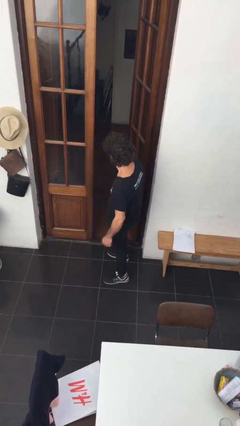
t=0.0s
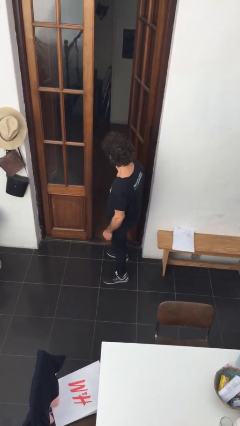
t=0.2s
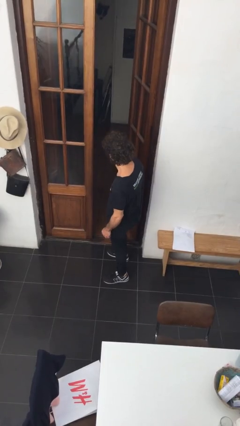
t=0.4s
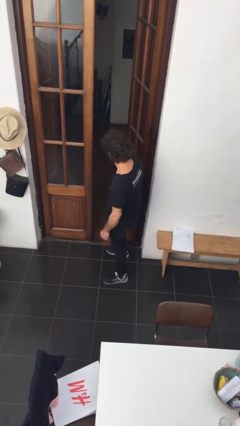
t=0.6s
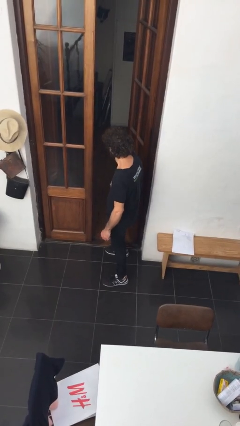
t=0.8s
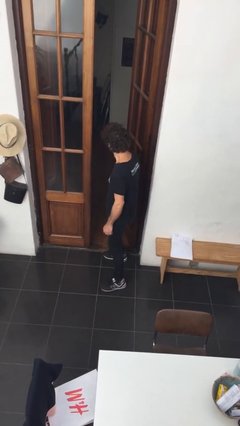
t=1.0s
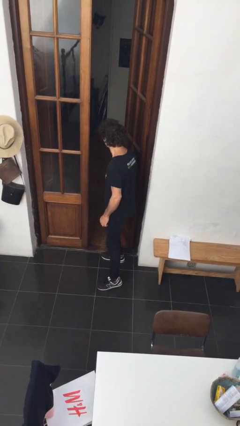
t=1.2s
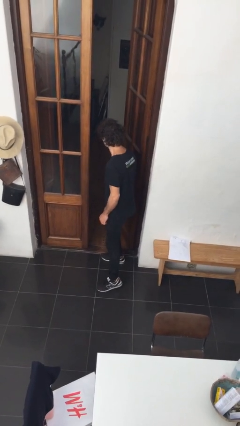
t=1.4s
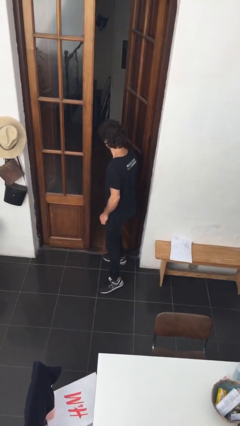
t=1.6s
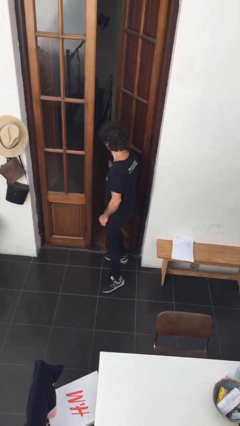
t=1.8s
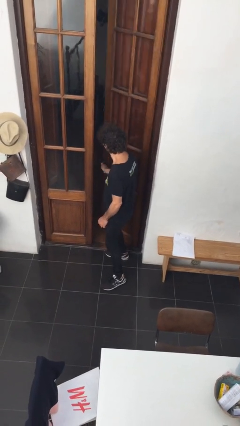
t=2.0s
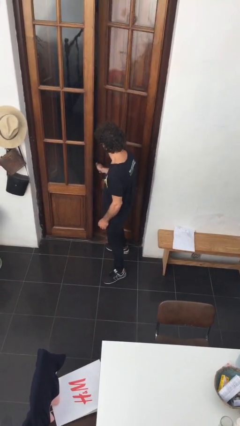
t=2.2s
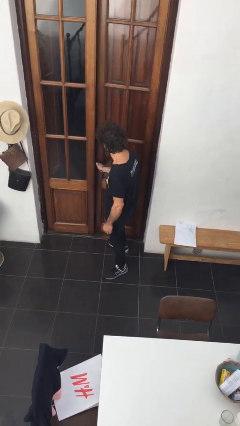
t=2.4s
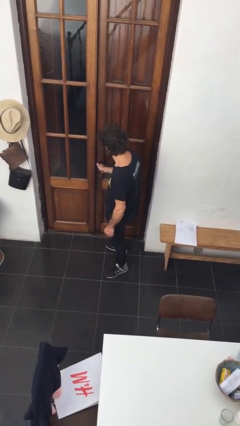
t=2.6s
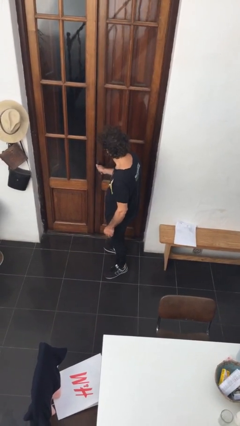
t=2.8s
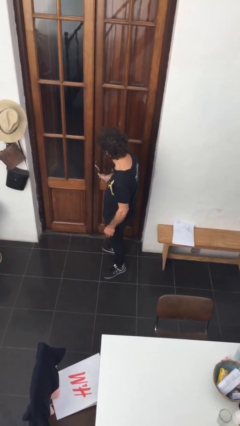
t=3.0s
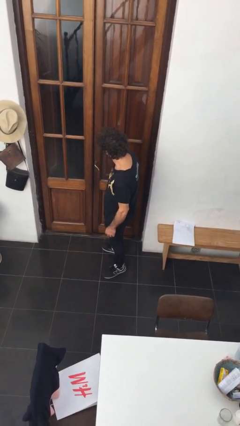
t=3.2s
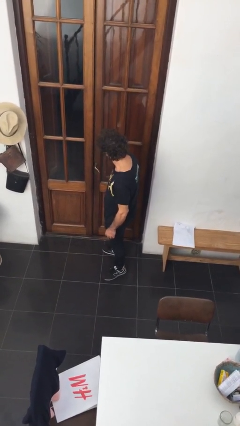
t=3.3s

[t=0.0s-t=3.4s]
person closes facility door

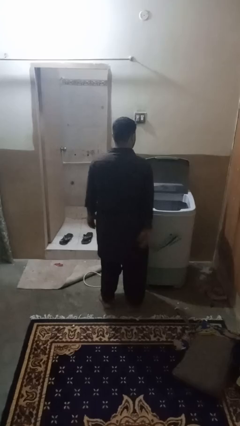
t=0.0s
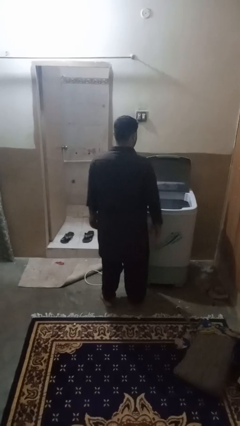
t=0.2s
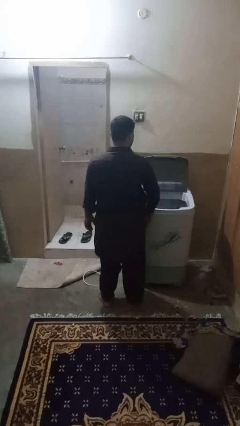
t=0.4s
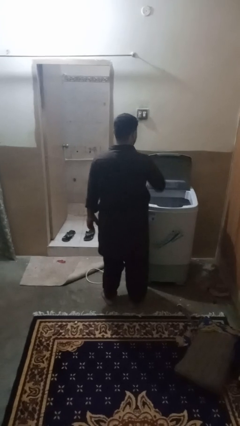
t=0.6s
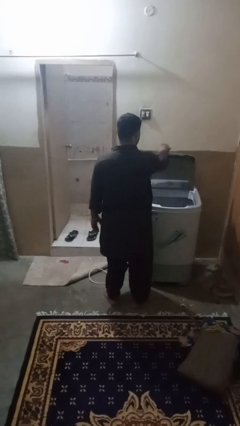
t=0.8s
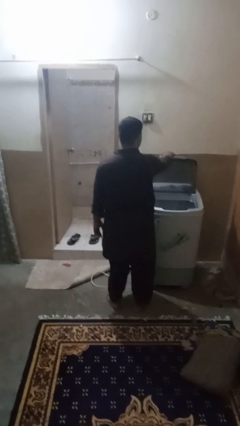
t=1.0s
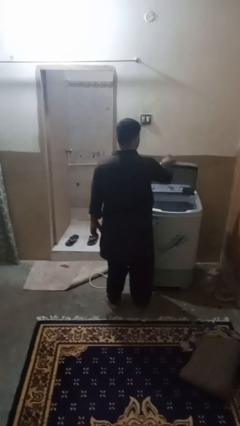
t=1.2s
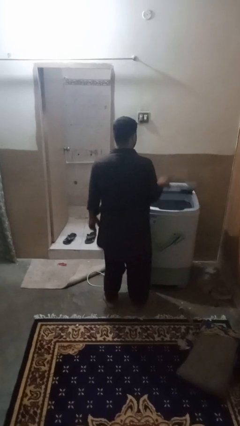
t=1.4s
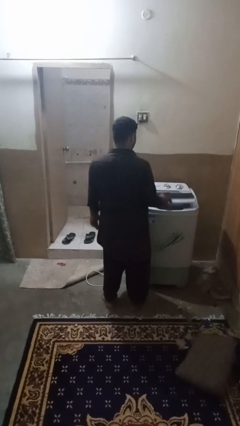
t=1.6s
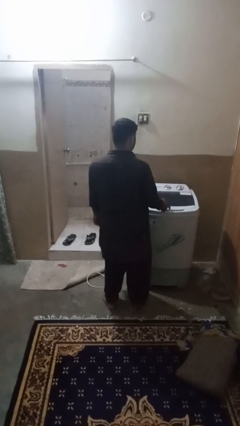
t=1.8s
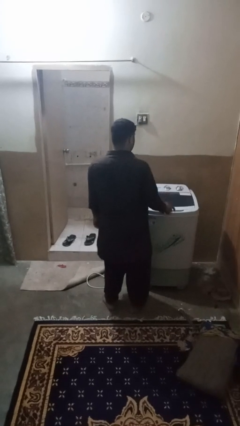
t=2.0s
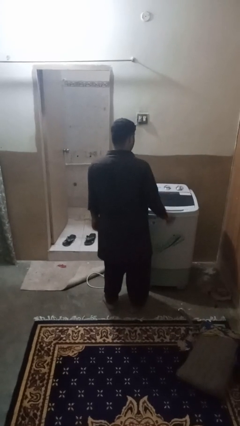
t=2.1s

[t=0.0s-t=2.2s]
person closes clothes washer

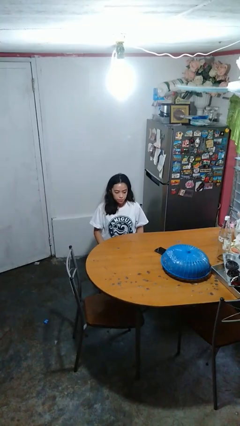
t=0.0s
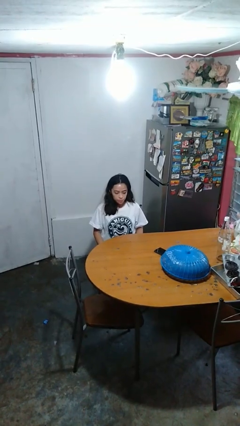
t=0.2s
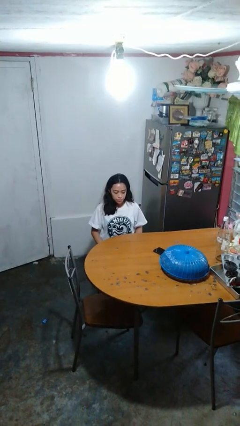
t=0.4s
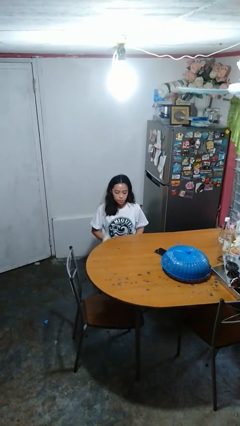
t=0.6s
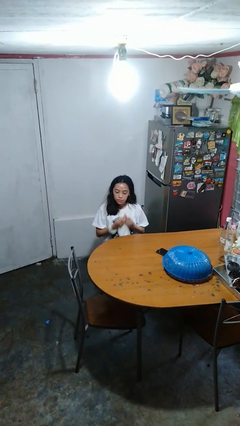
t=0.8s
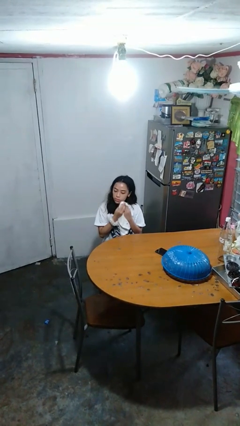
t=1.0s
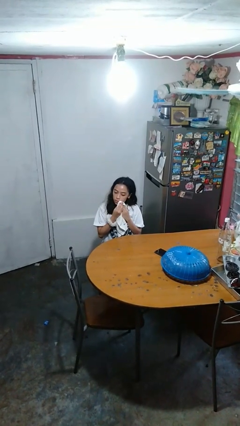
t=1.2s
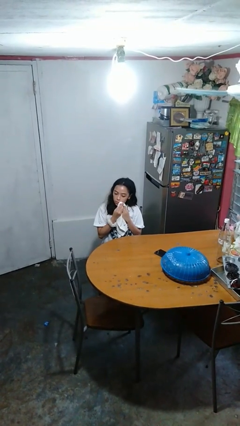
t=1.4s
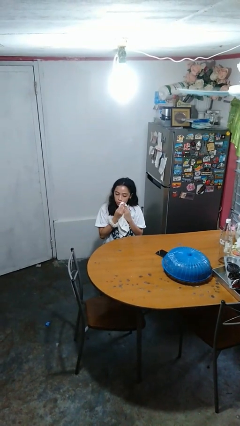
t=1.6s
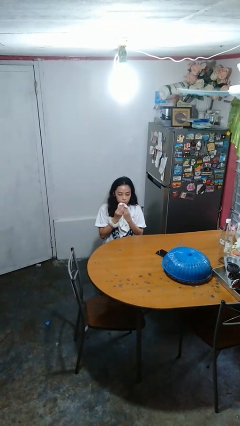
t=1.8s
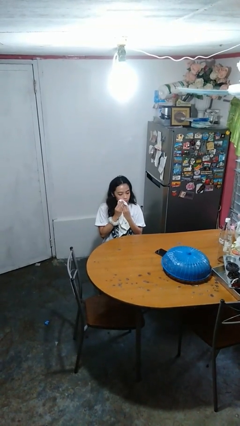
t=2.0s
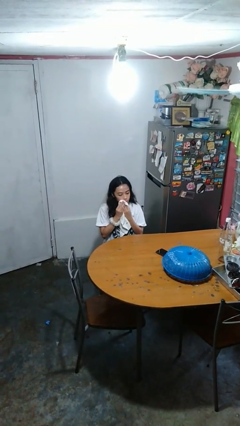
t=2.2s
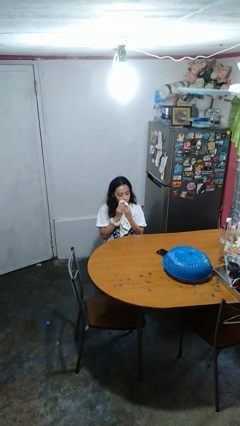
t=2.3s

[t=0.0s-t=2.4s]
person wipes mouth with napkin

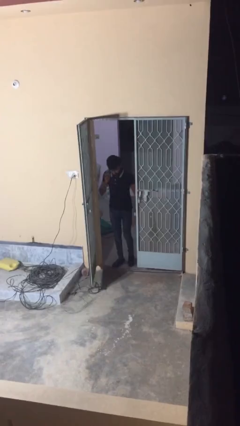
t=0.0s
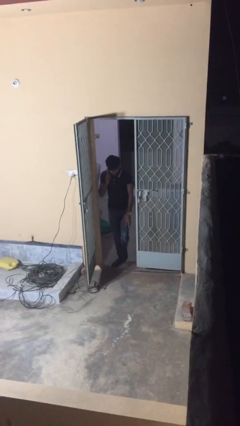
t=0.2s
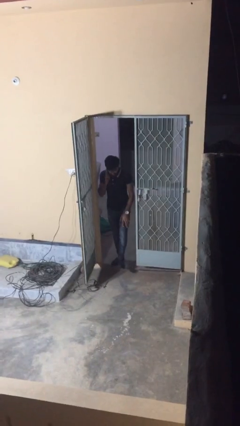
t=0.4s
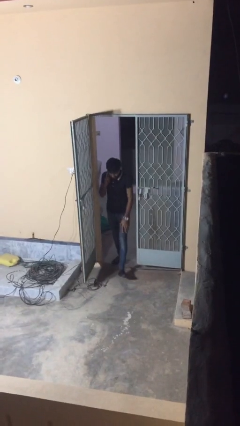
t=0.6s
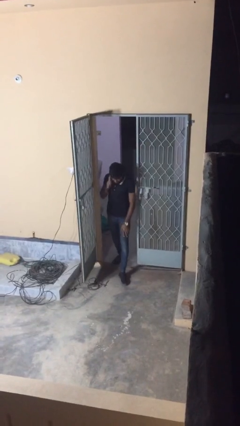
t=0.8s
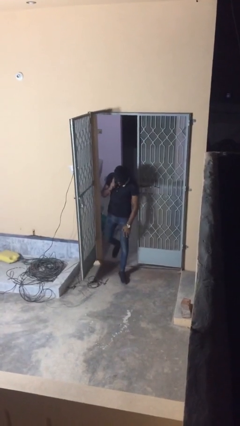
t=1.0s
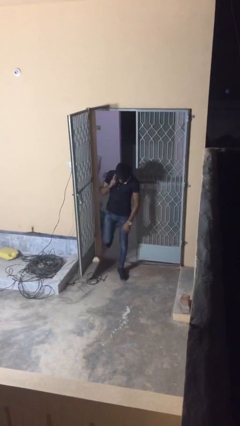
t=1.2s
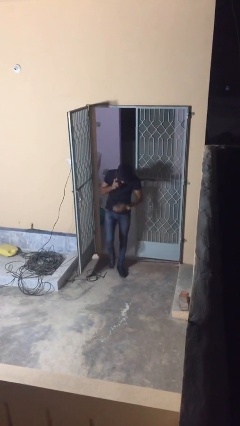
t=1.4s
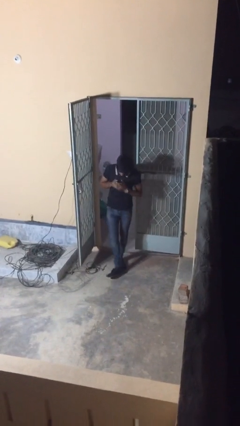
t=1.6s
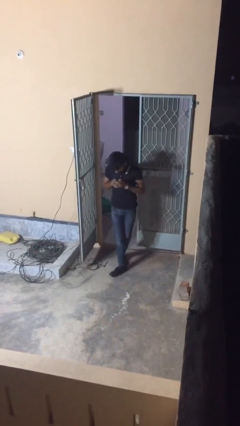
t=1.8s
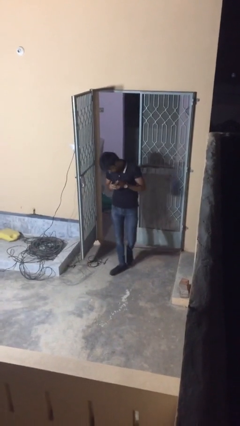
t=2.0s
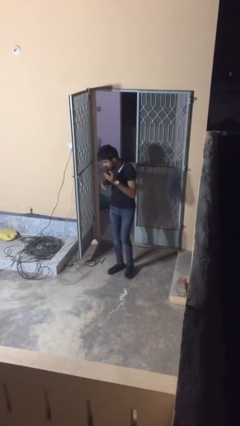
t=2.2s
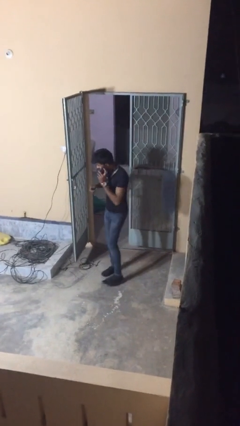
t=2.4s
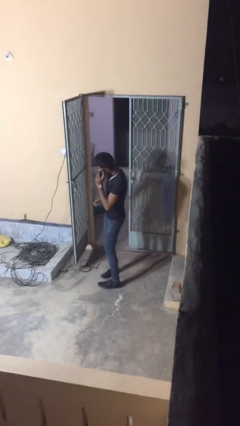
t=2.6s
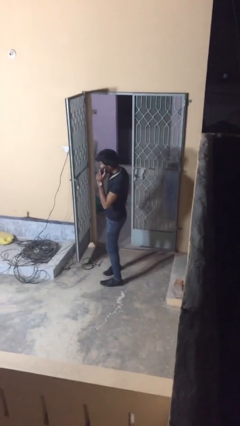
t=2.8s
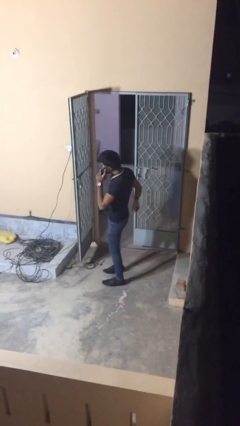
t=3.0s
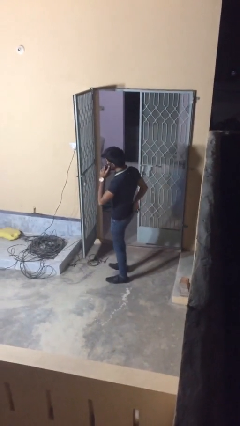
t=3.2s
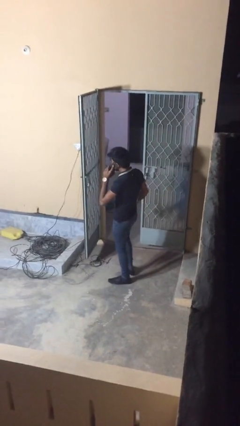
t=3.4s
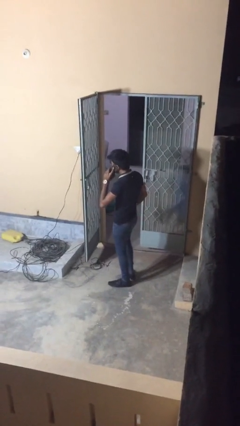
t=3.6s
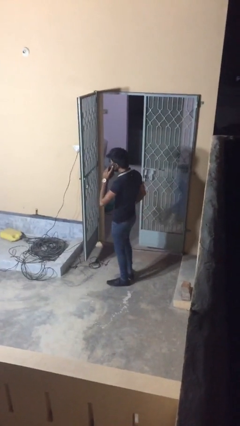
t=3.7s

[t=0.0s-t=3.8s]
person enters scene through structure

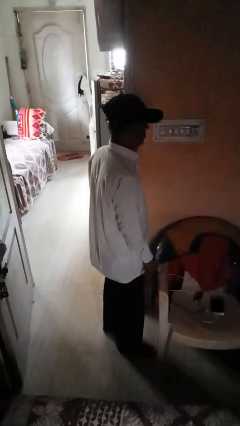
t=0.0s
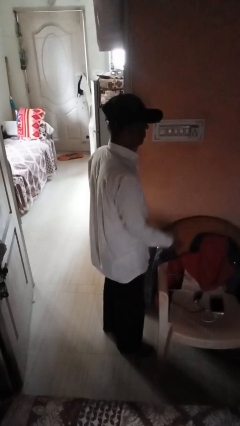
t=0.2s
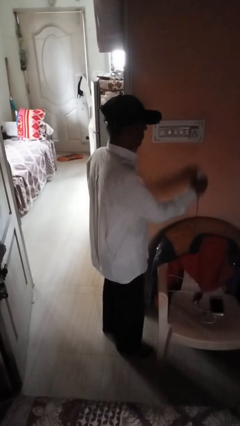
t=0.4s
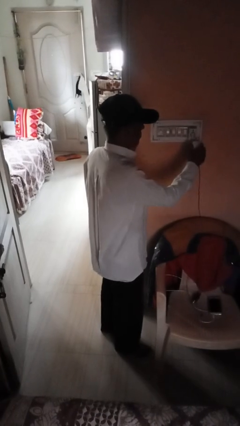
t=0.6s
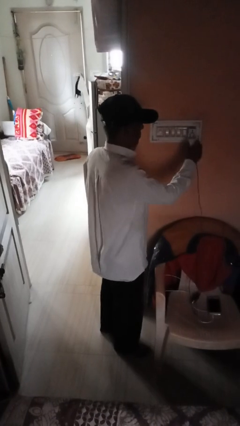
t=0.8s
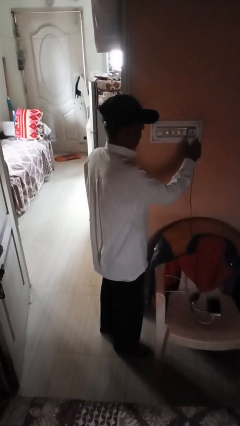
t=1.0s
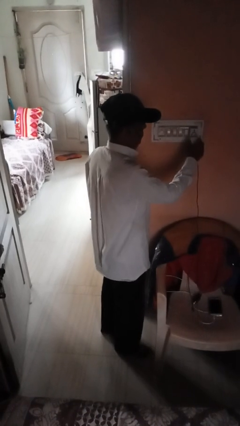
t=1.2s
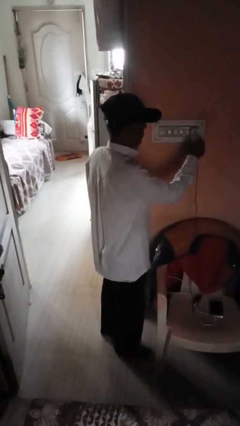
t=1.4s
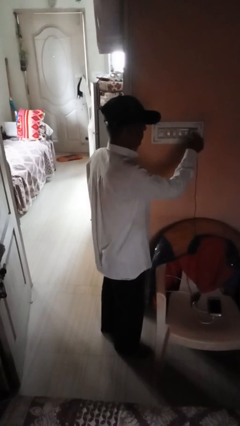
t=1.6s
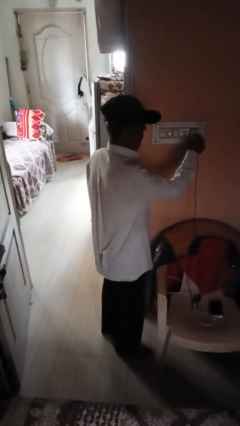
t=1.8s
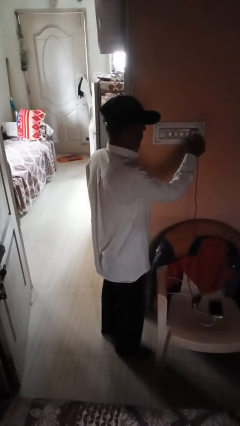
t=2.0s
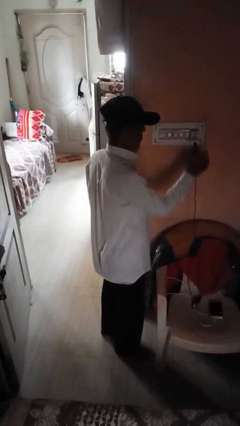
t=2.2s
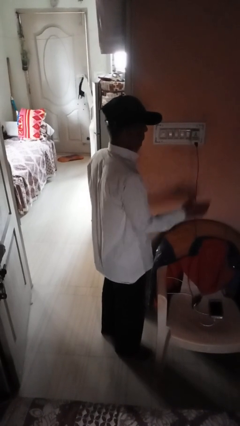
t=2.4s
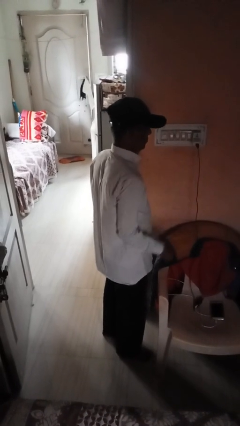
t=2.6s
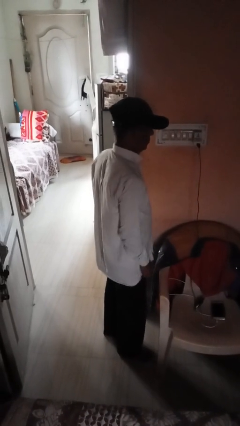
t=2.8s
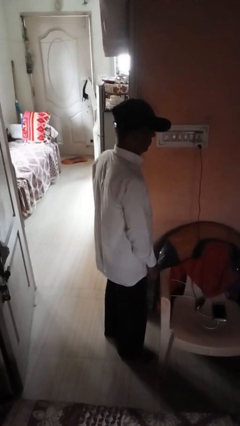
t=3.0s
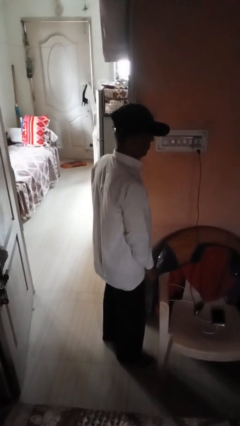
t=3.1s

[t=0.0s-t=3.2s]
person plugs into electrical socket

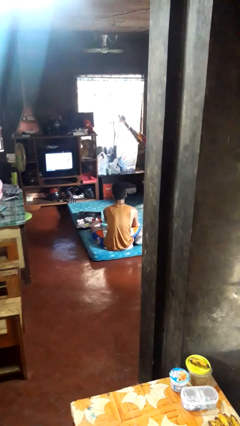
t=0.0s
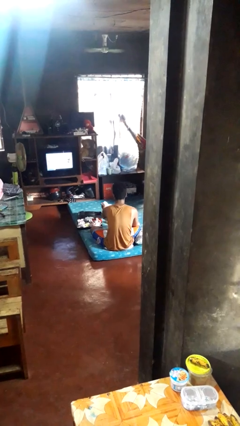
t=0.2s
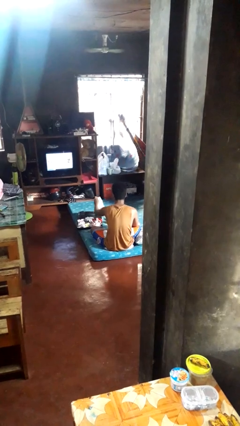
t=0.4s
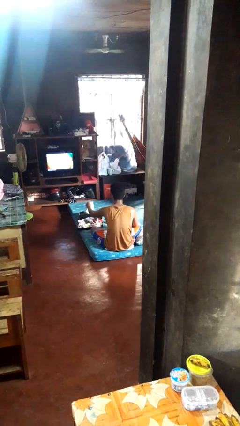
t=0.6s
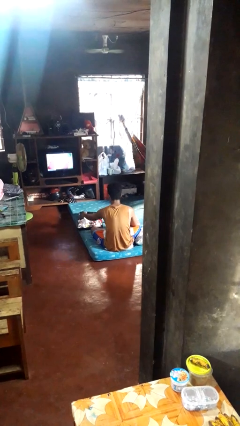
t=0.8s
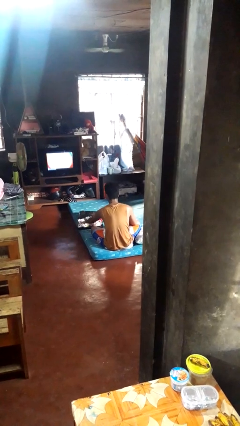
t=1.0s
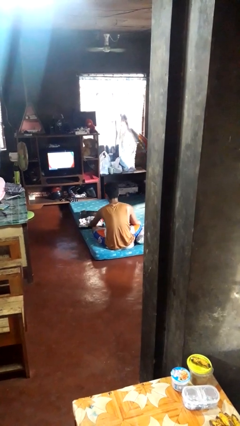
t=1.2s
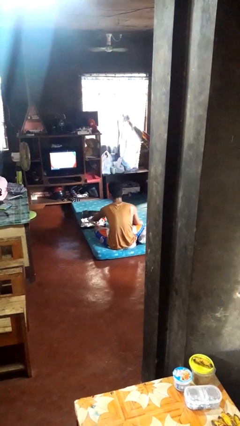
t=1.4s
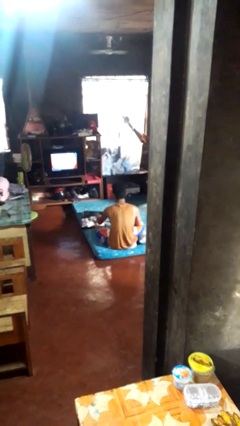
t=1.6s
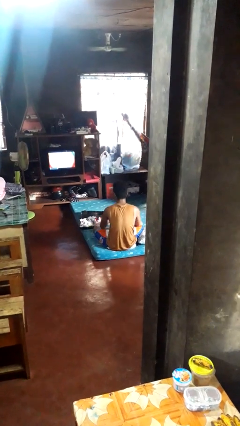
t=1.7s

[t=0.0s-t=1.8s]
person loads clothes into suitcase

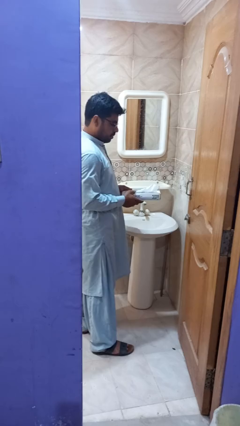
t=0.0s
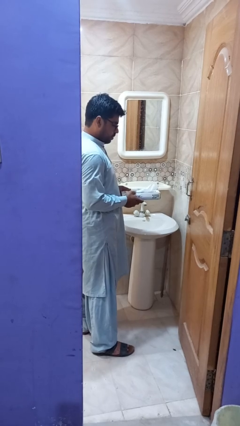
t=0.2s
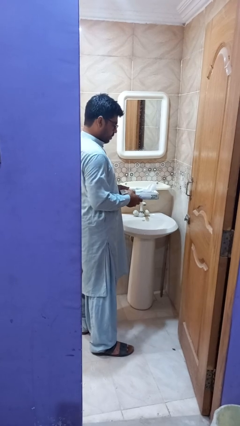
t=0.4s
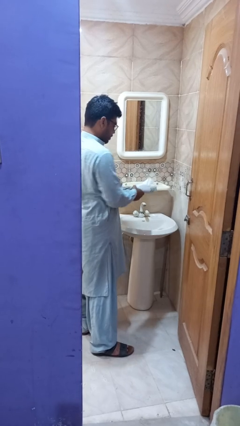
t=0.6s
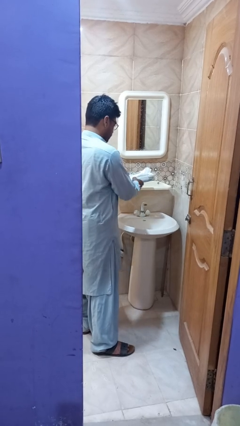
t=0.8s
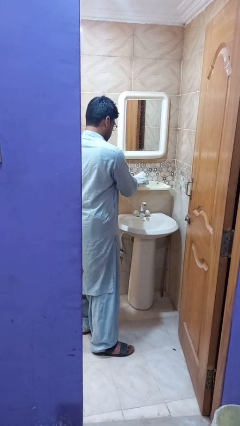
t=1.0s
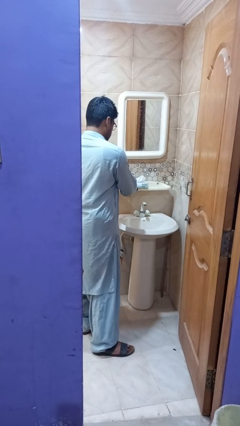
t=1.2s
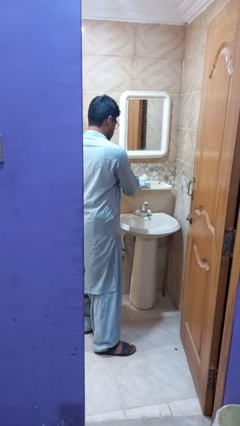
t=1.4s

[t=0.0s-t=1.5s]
person puts down object on countertop
